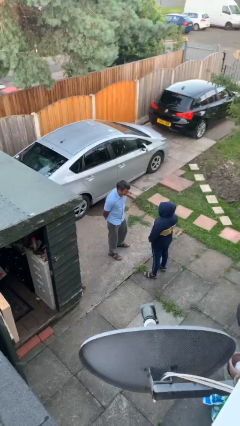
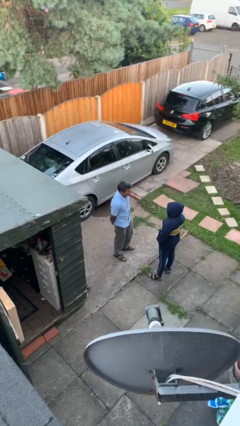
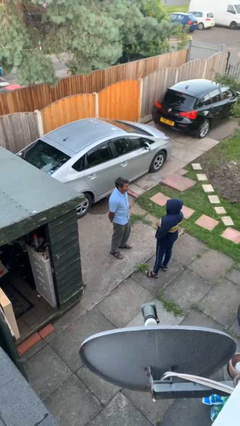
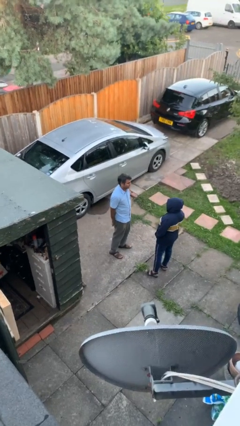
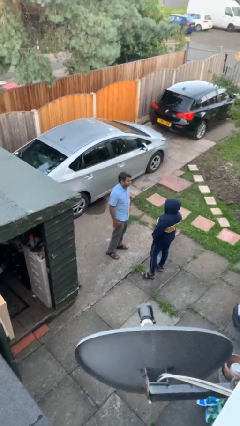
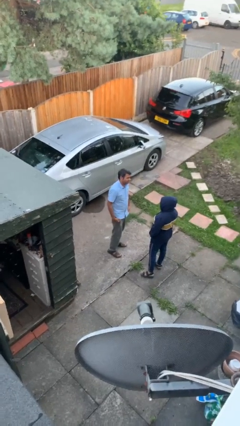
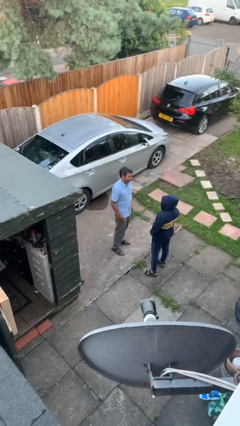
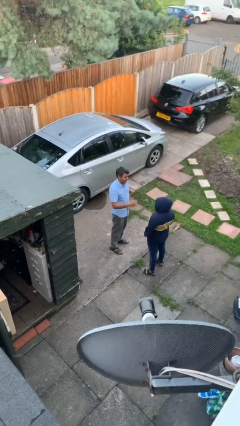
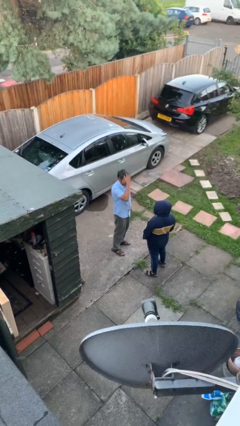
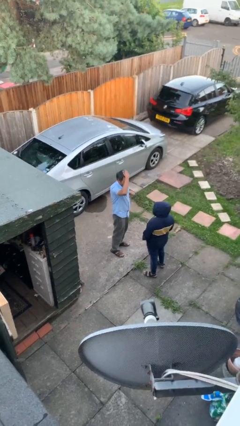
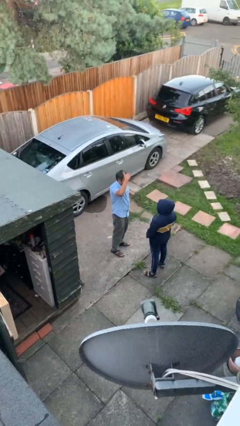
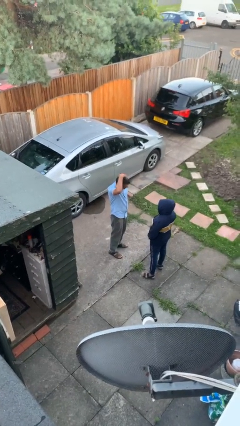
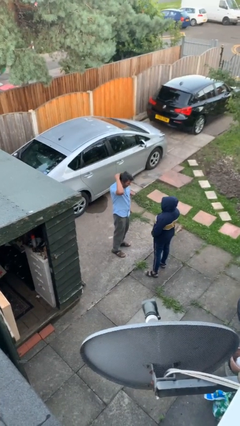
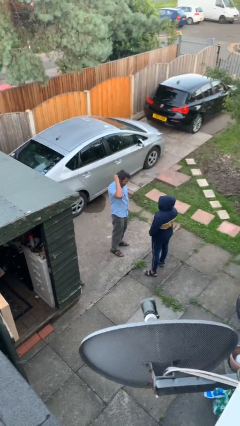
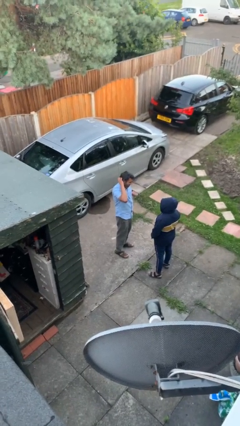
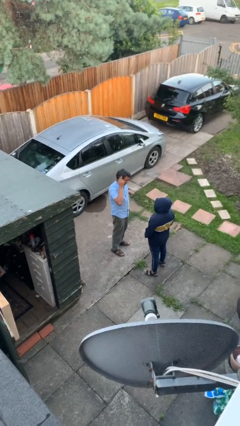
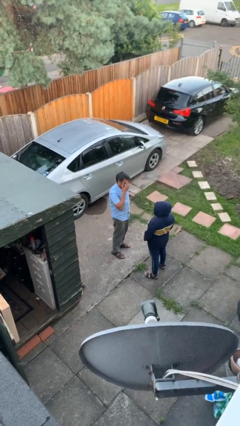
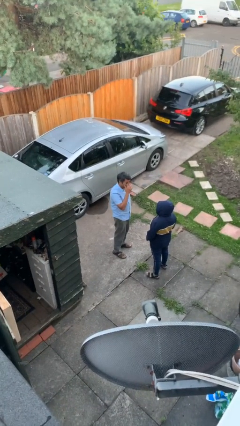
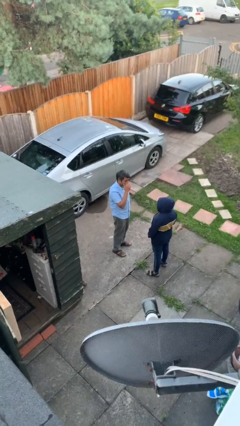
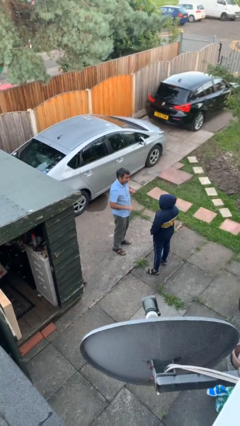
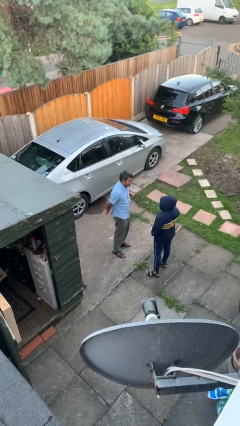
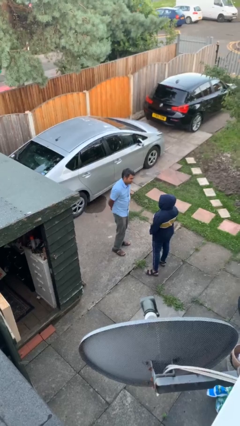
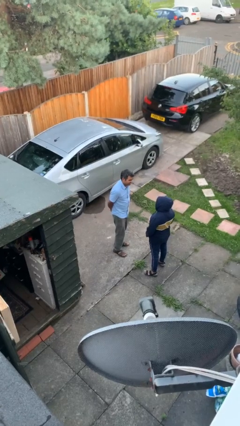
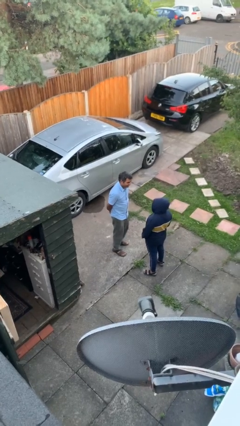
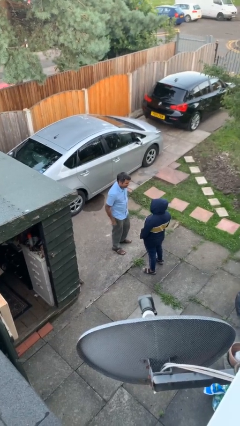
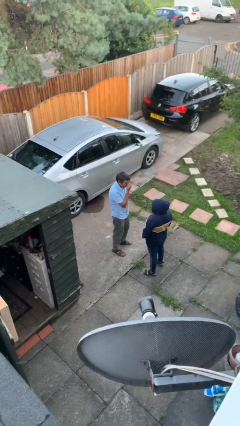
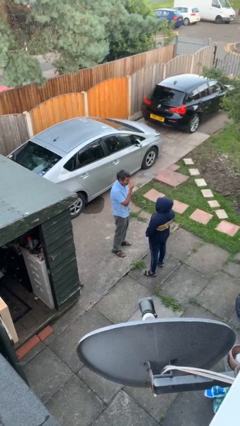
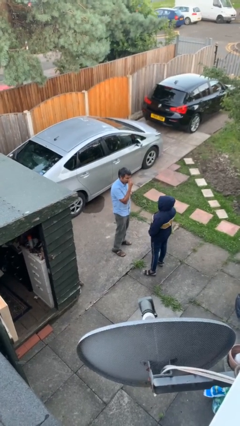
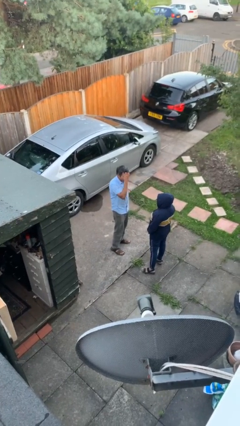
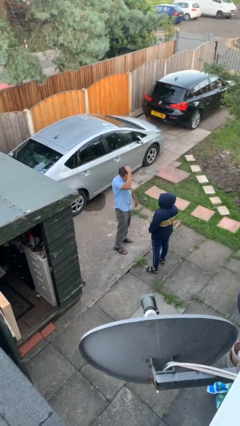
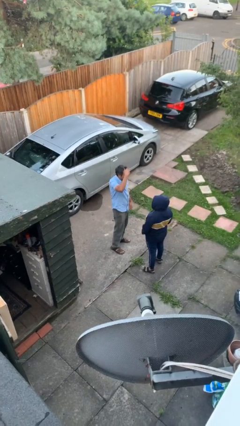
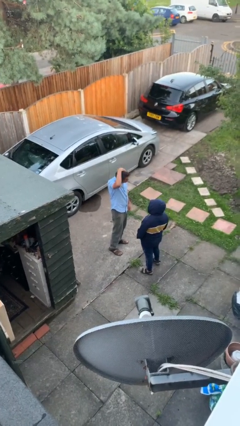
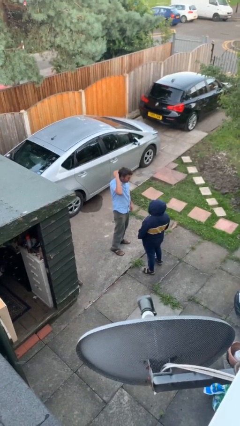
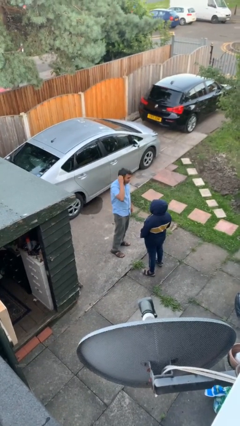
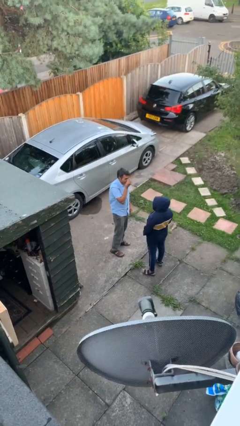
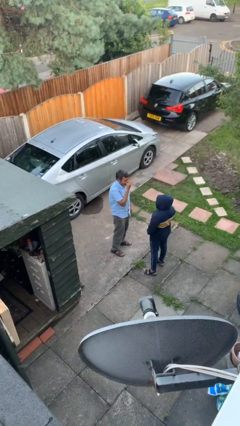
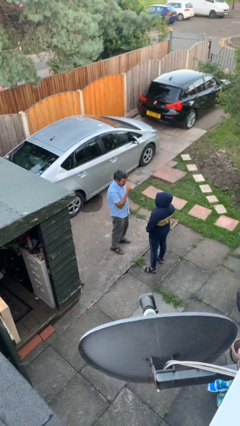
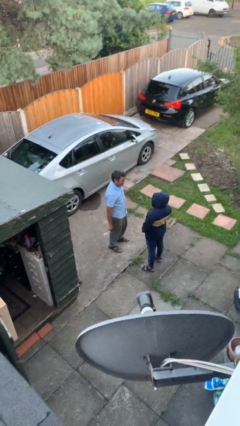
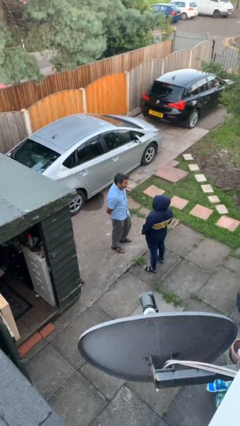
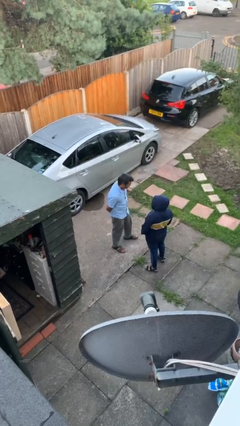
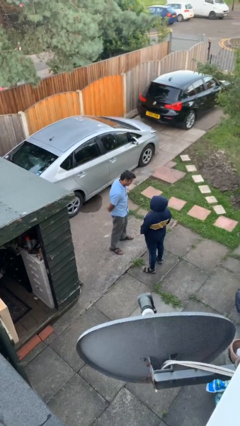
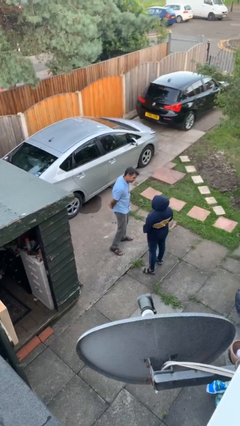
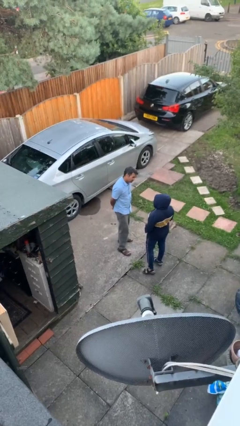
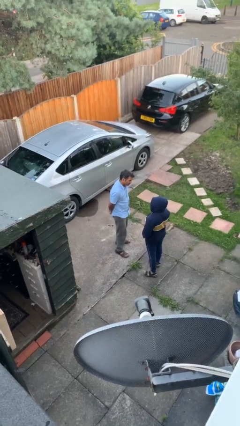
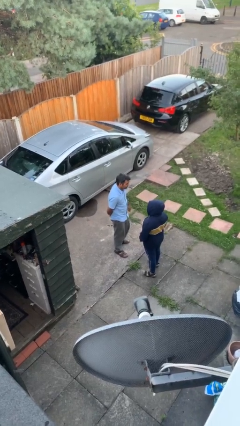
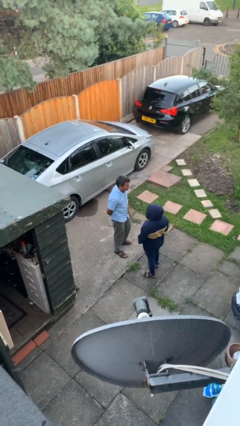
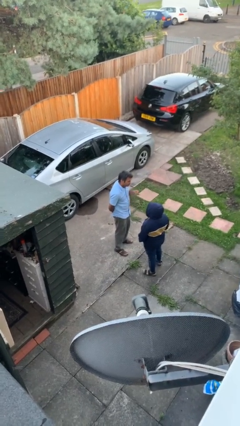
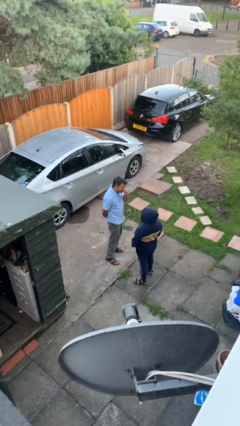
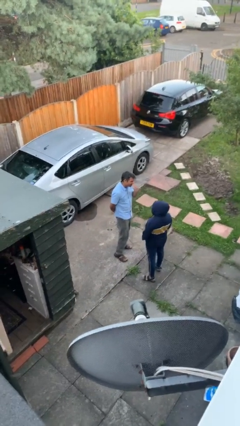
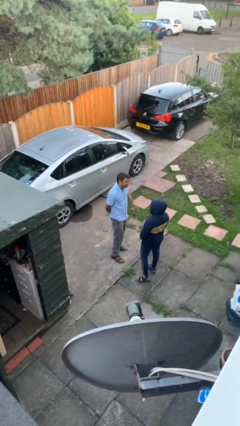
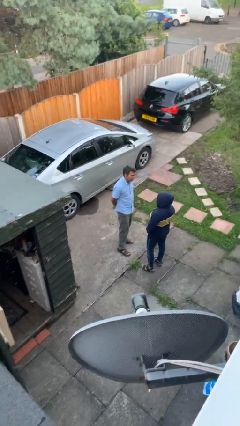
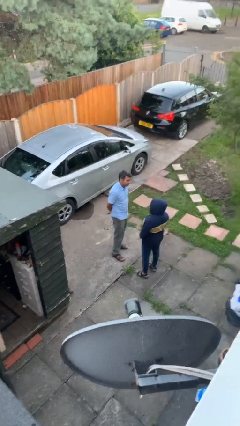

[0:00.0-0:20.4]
person talks to person

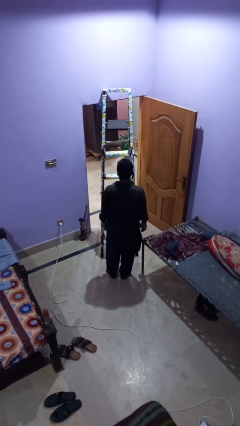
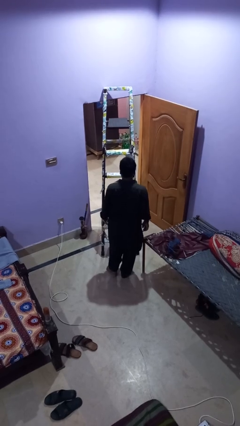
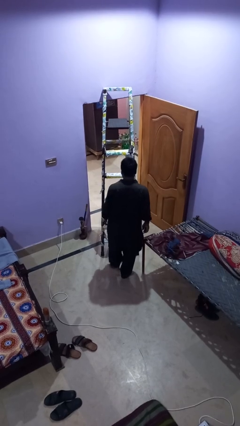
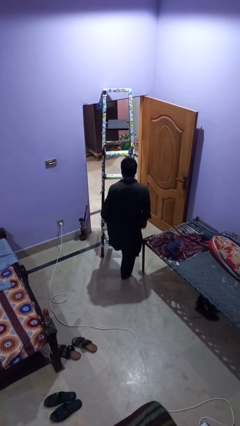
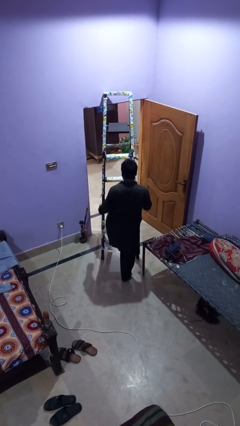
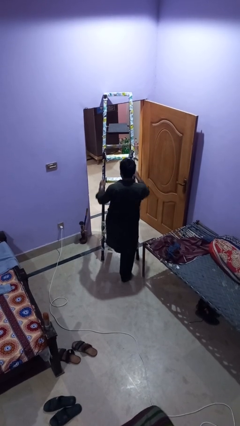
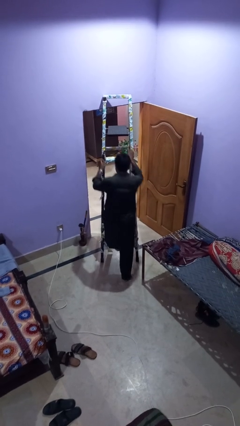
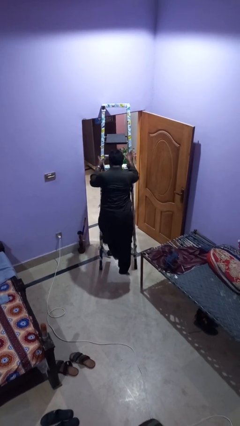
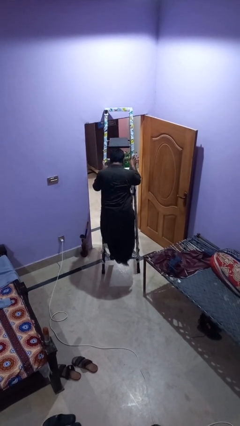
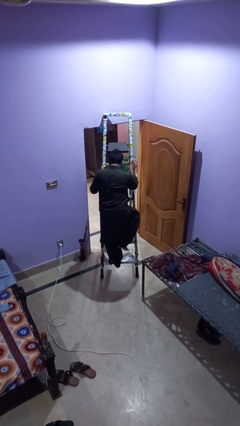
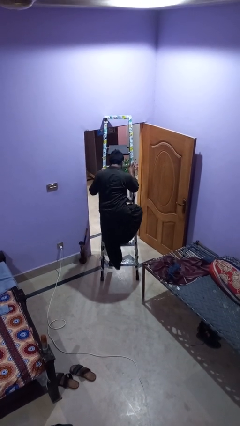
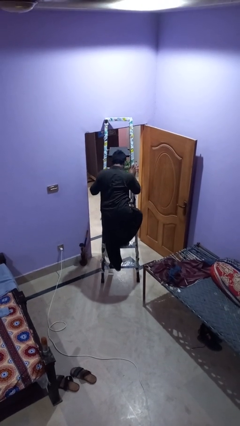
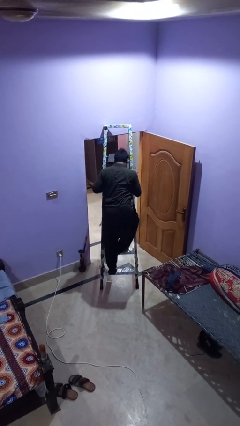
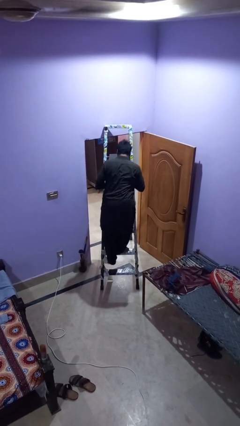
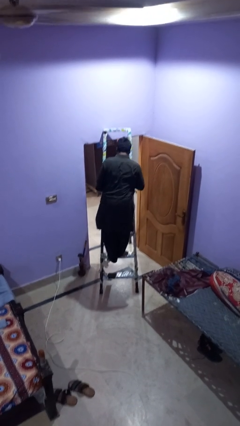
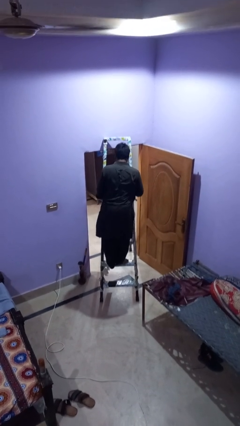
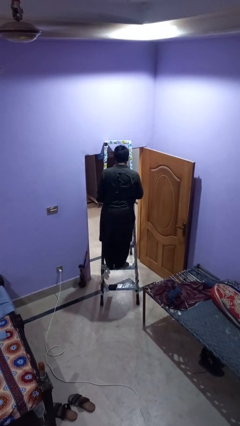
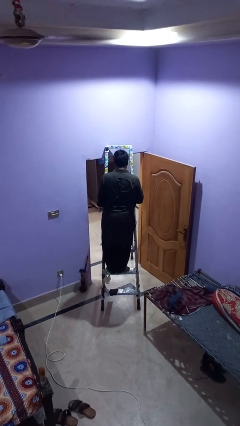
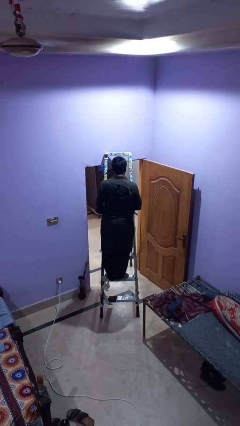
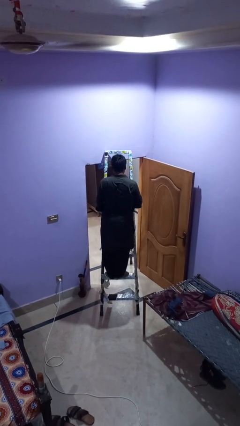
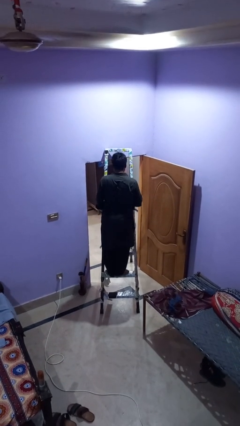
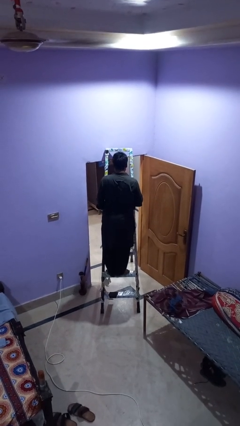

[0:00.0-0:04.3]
person climbs up ladder

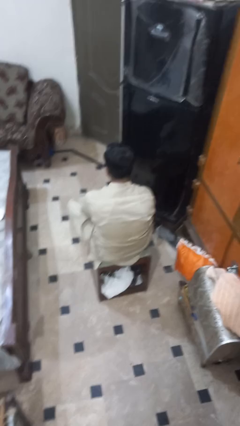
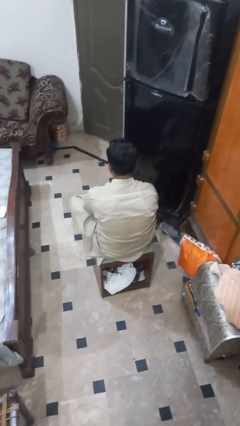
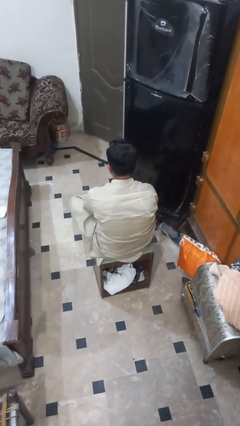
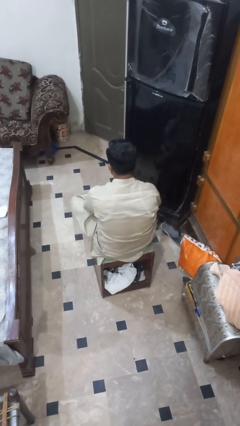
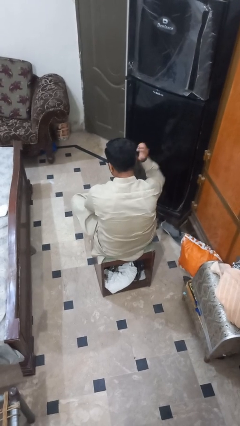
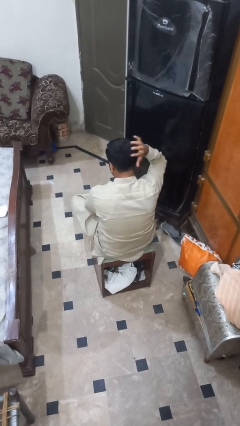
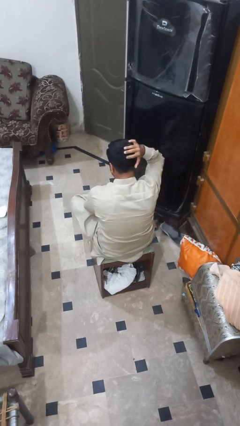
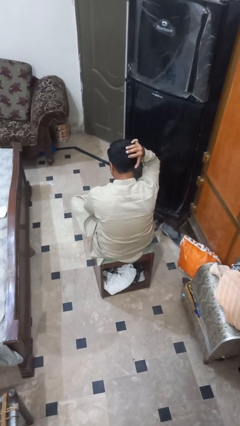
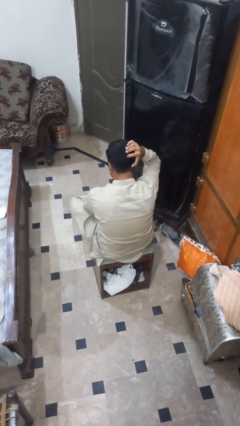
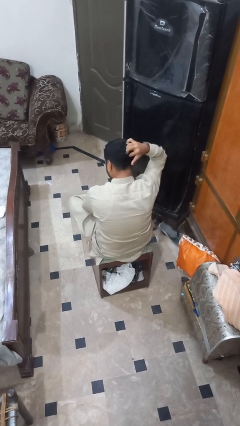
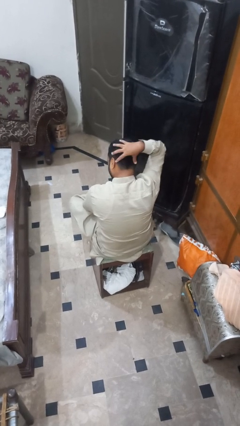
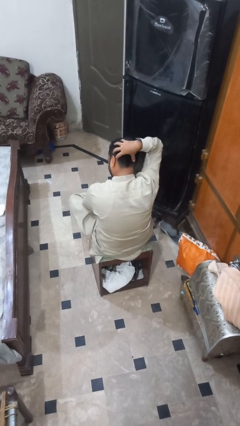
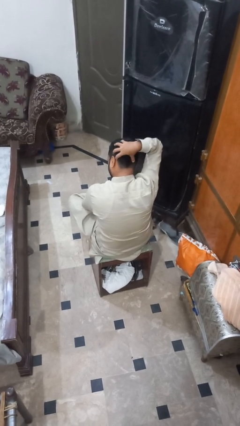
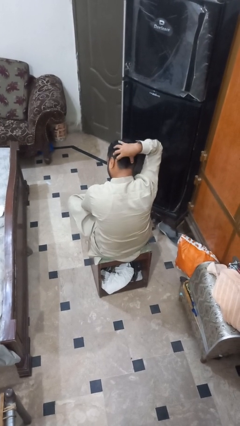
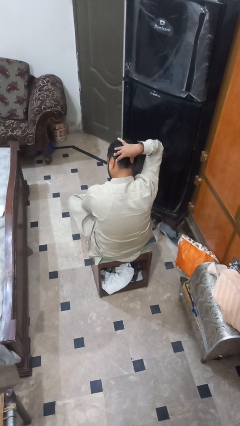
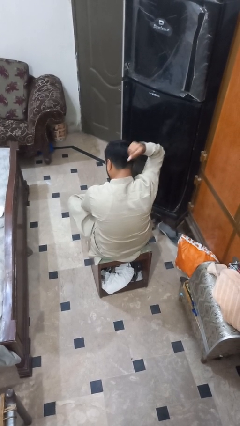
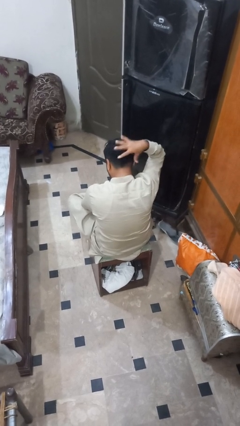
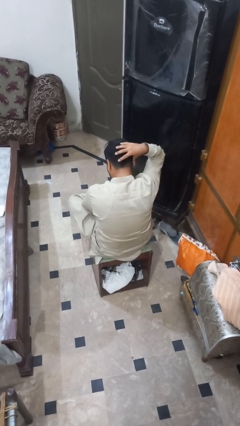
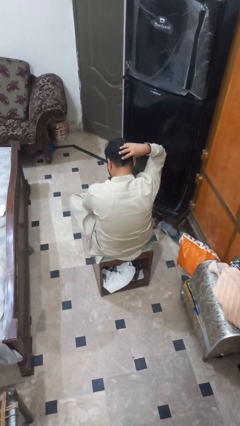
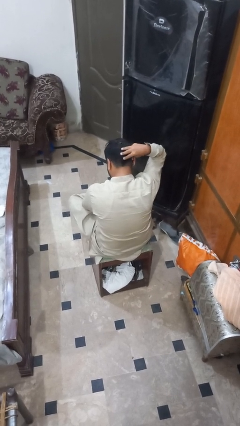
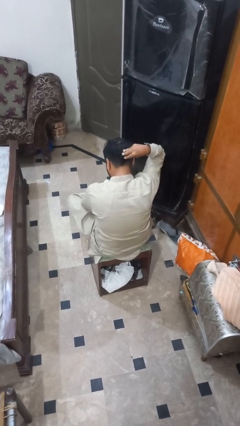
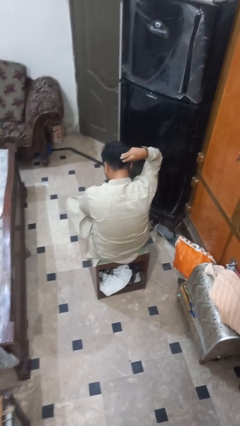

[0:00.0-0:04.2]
person strokes hair
